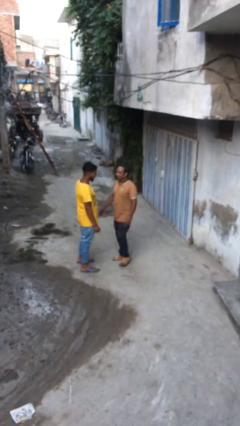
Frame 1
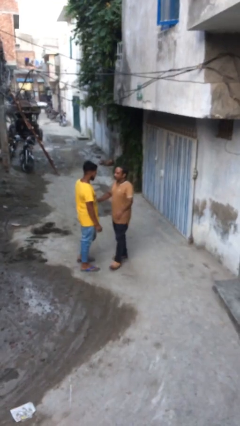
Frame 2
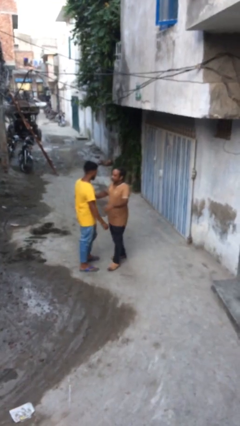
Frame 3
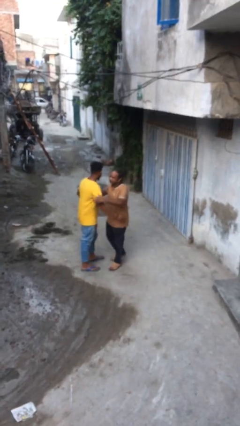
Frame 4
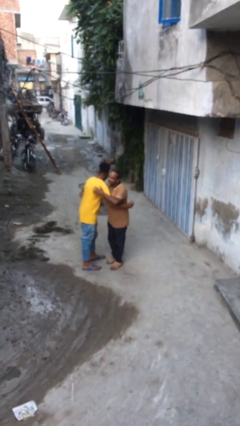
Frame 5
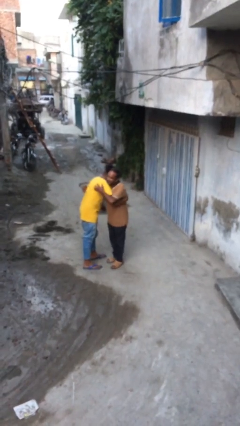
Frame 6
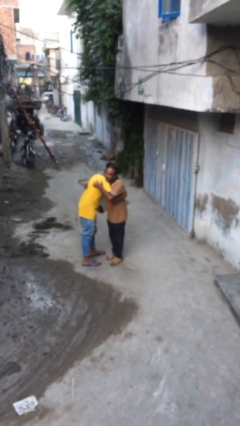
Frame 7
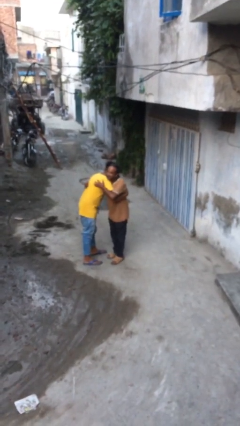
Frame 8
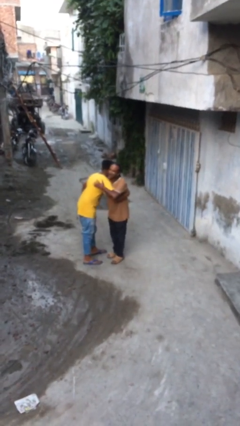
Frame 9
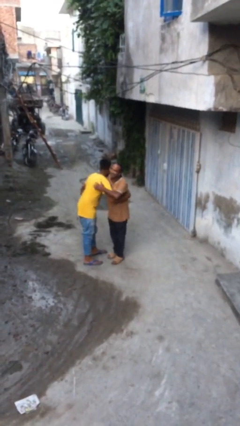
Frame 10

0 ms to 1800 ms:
person embraces person

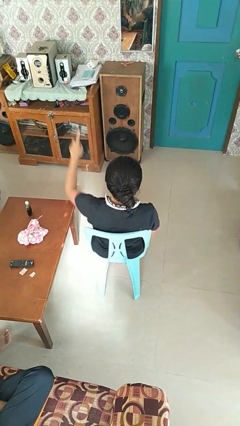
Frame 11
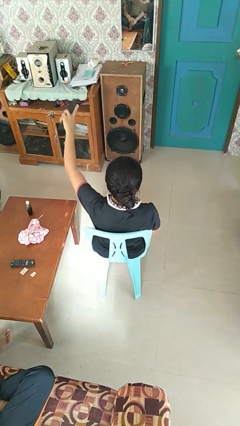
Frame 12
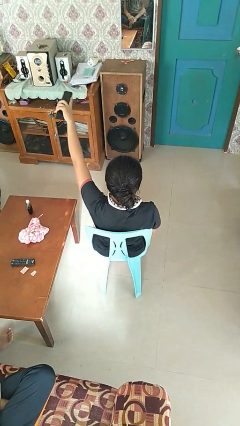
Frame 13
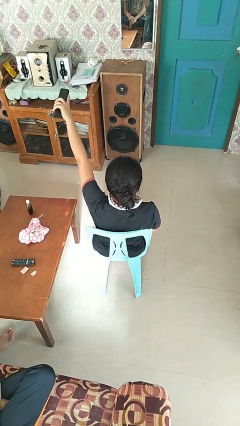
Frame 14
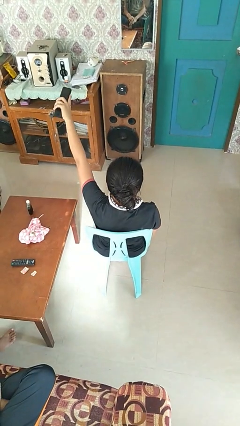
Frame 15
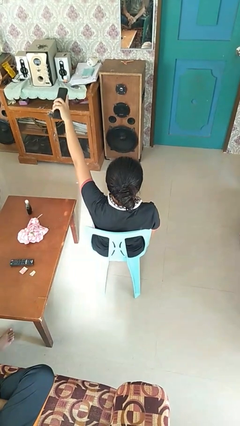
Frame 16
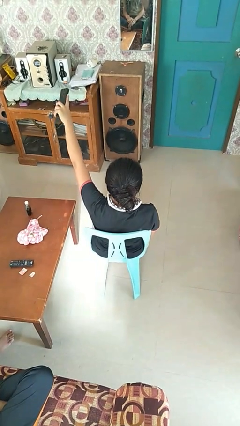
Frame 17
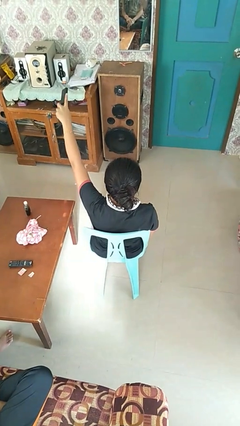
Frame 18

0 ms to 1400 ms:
person uses television remote

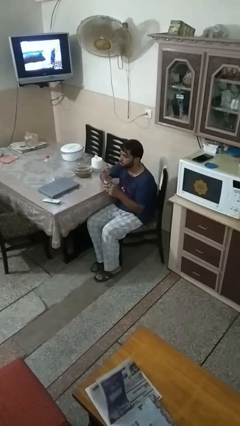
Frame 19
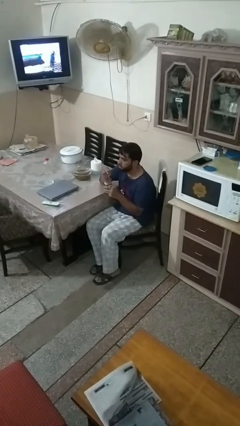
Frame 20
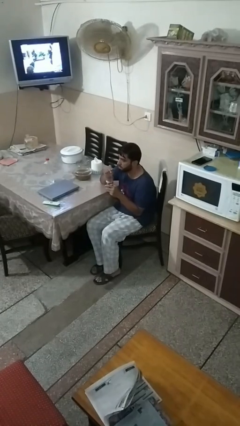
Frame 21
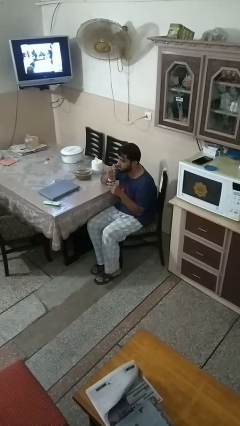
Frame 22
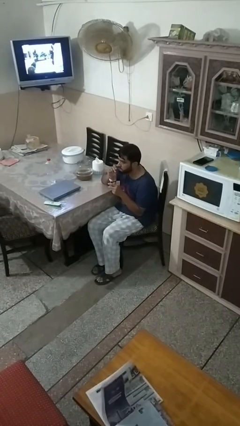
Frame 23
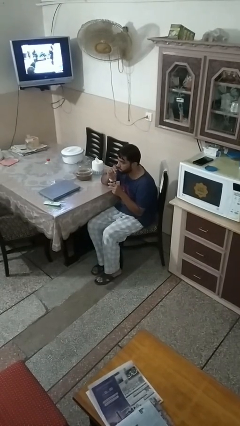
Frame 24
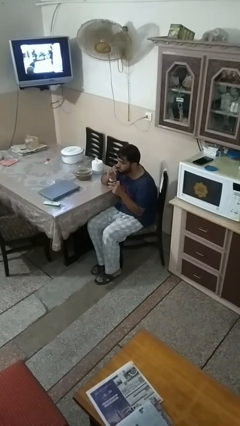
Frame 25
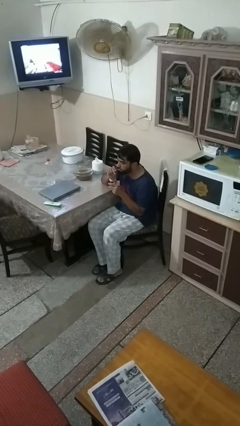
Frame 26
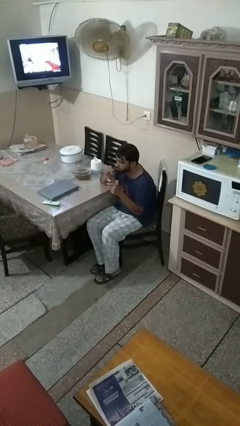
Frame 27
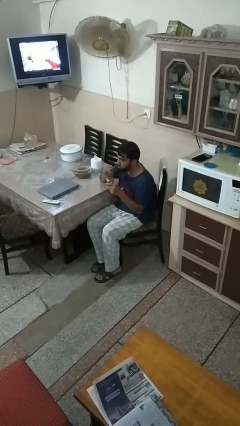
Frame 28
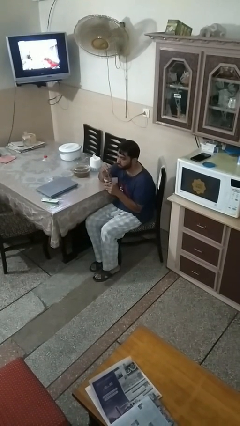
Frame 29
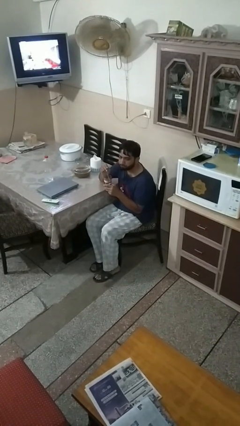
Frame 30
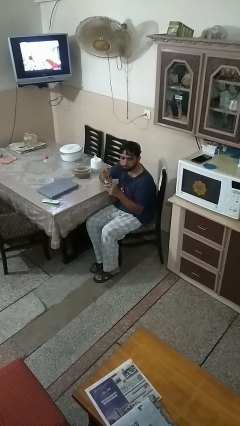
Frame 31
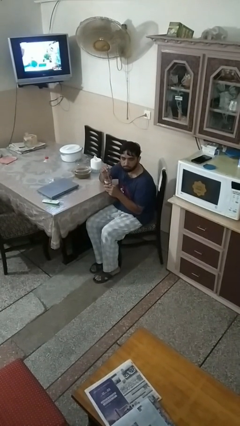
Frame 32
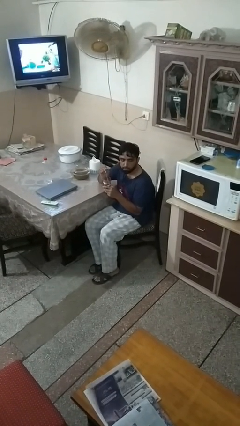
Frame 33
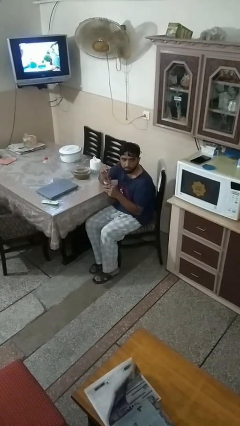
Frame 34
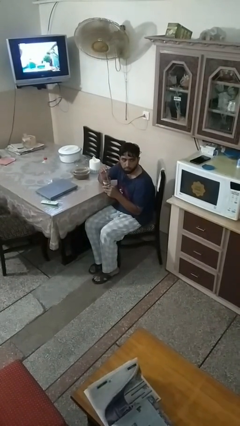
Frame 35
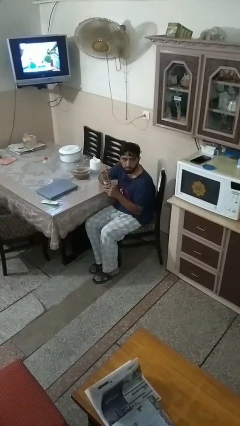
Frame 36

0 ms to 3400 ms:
person drinks from straw

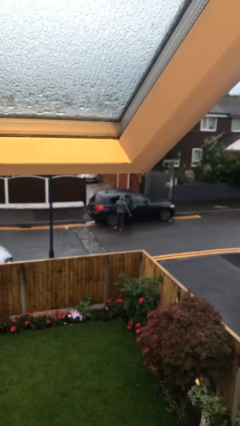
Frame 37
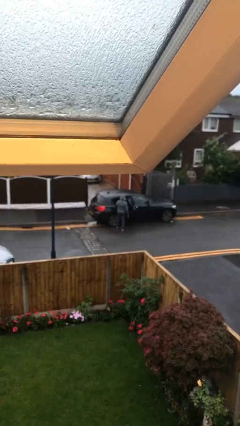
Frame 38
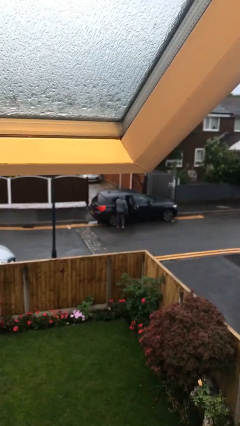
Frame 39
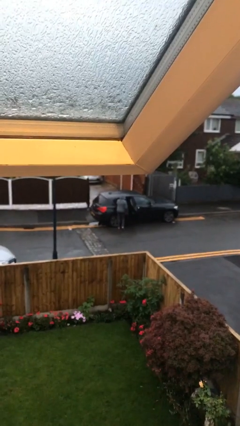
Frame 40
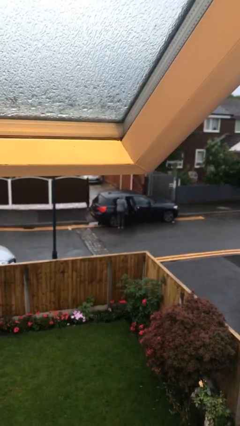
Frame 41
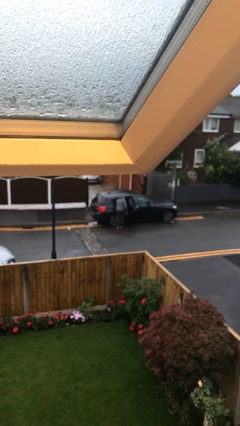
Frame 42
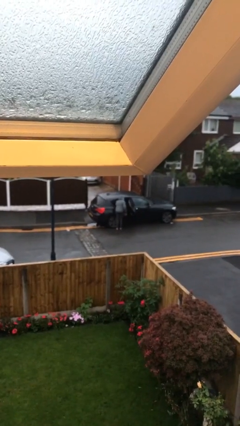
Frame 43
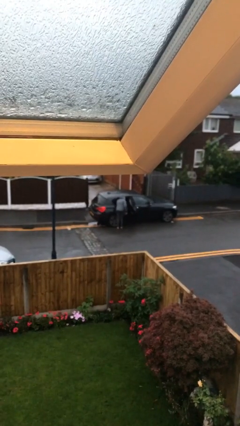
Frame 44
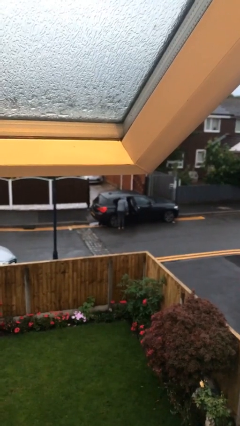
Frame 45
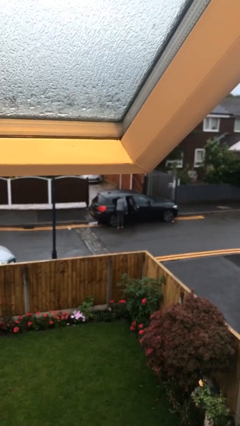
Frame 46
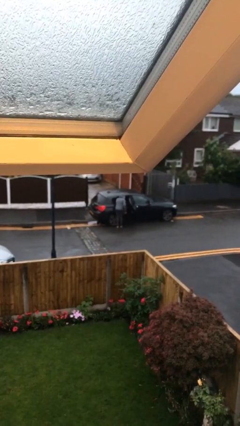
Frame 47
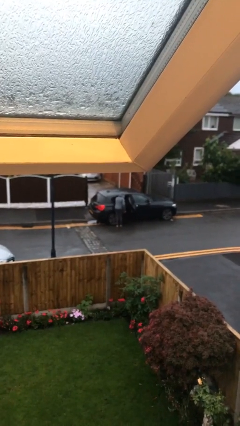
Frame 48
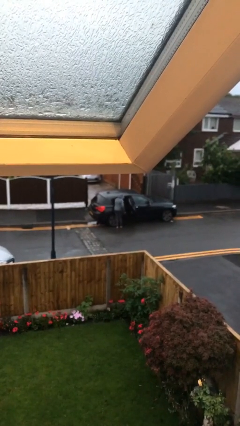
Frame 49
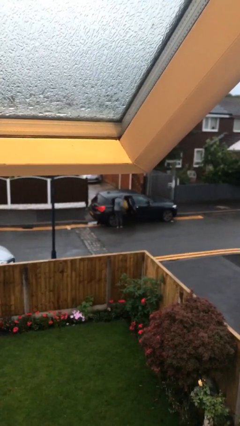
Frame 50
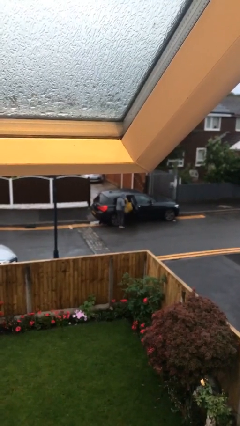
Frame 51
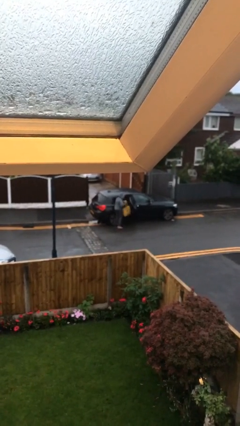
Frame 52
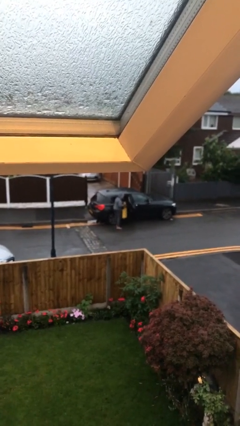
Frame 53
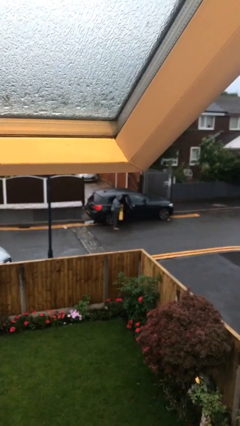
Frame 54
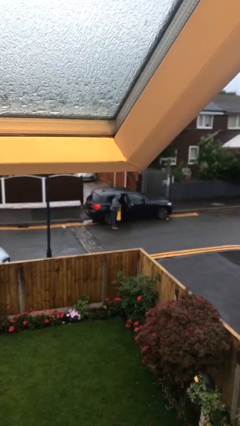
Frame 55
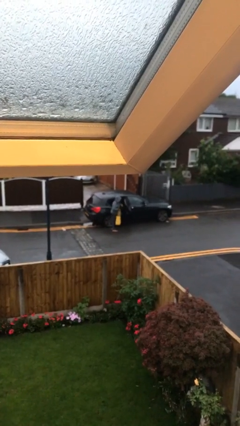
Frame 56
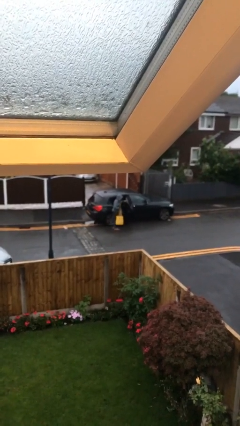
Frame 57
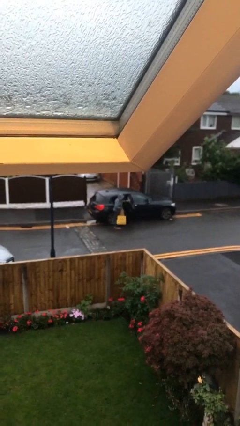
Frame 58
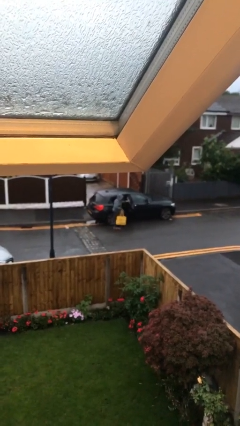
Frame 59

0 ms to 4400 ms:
person unloads car

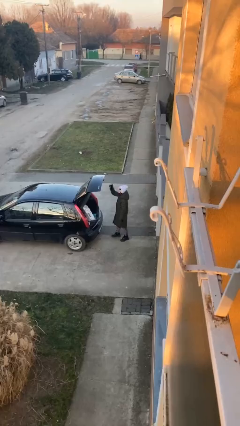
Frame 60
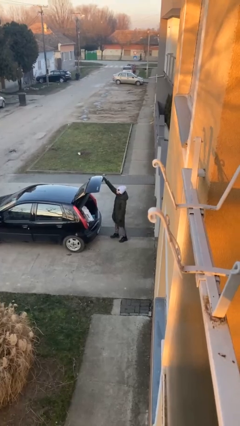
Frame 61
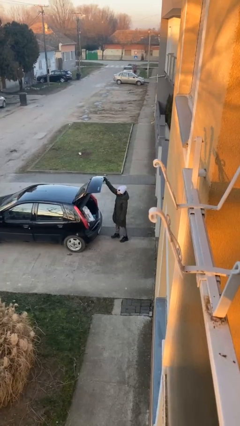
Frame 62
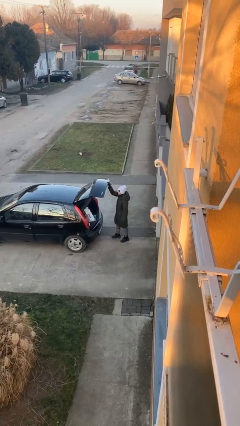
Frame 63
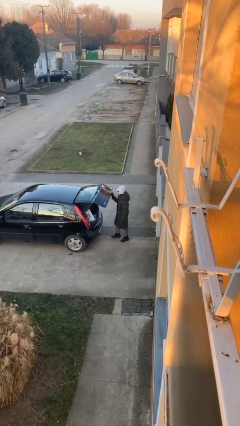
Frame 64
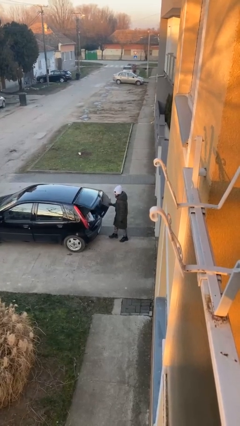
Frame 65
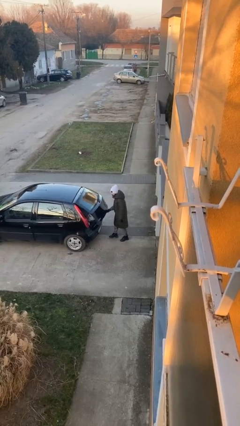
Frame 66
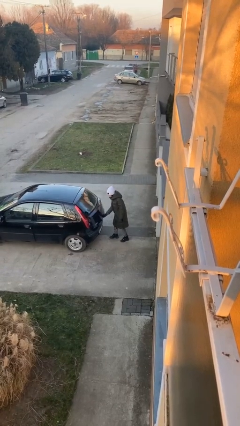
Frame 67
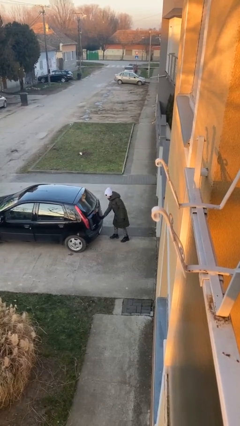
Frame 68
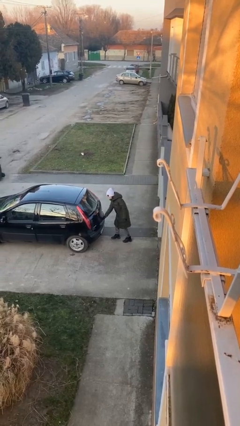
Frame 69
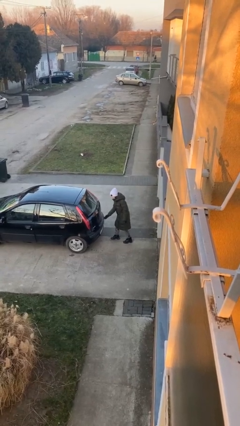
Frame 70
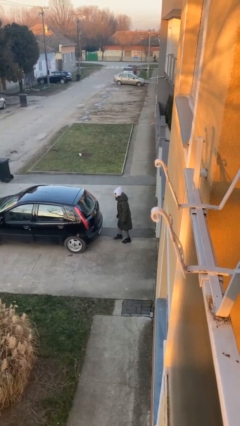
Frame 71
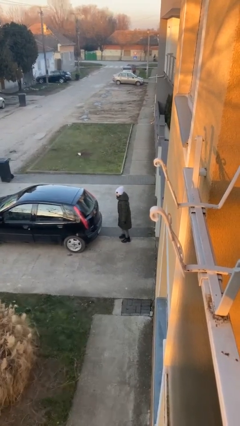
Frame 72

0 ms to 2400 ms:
person closes car trunk

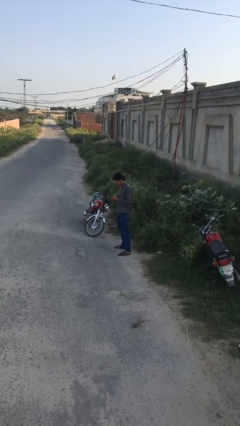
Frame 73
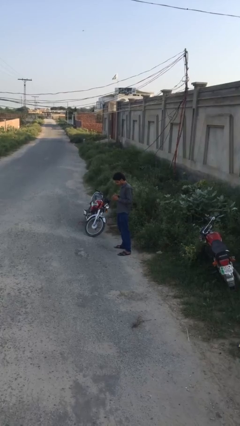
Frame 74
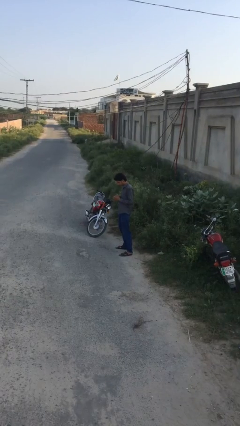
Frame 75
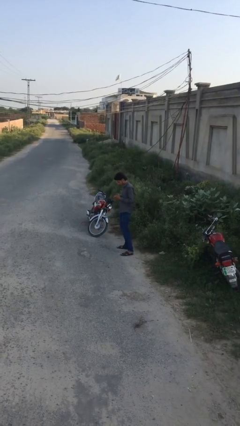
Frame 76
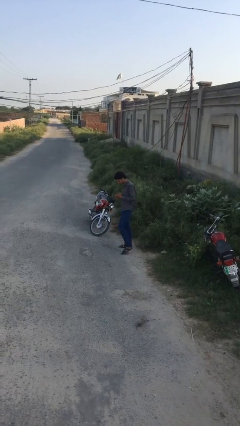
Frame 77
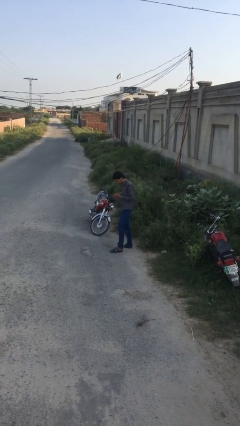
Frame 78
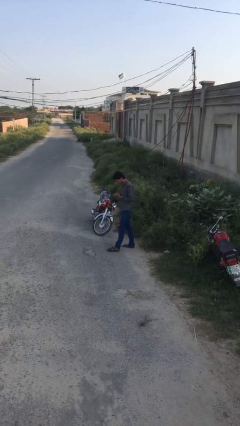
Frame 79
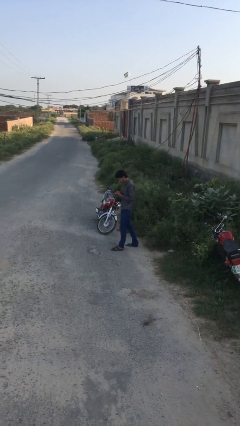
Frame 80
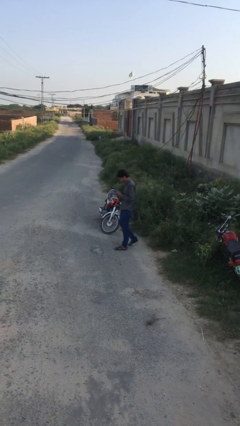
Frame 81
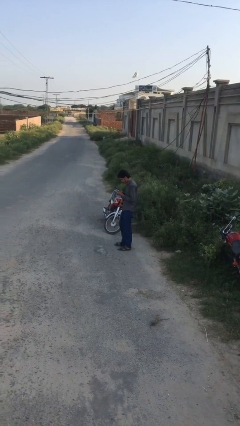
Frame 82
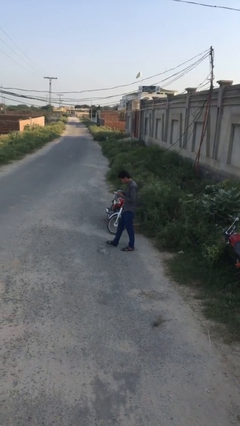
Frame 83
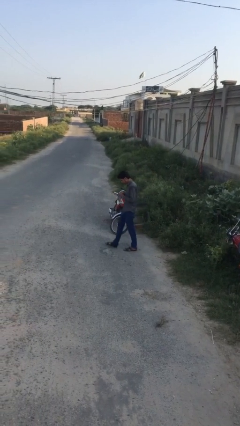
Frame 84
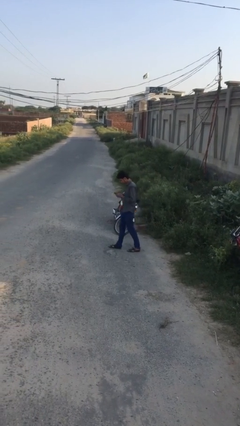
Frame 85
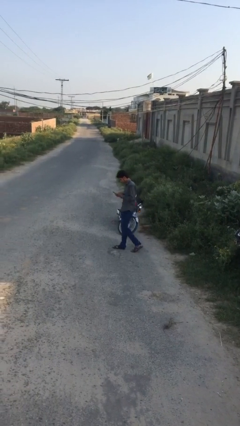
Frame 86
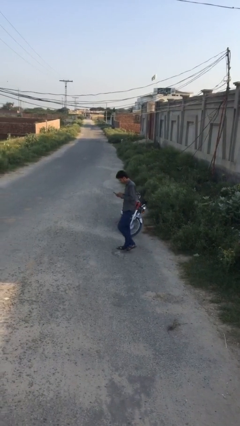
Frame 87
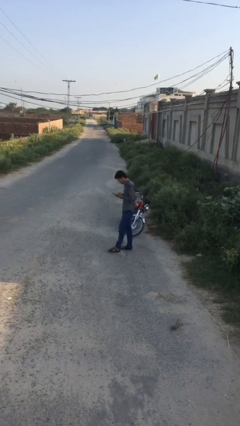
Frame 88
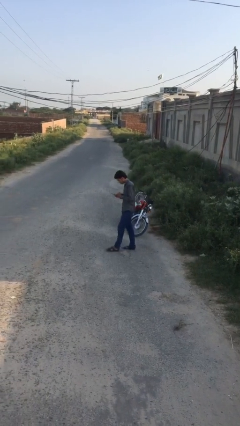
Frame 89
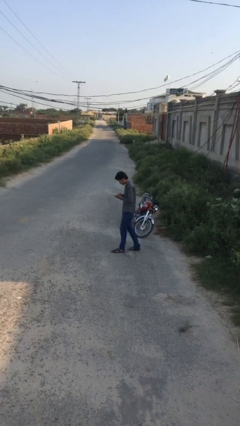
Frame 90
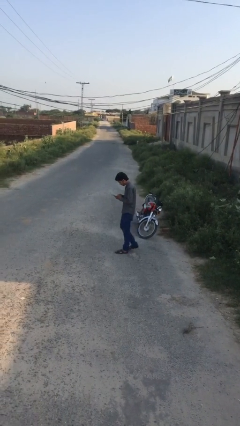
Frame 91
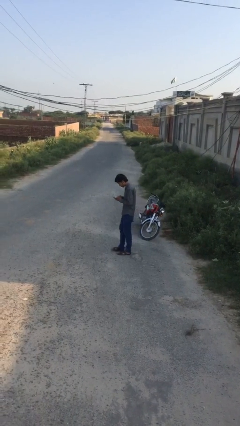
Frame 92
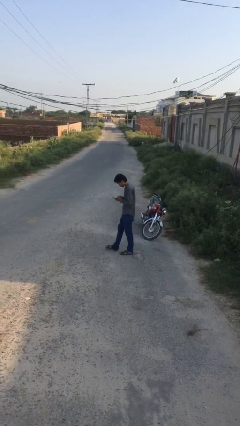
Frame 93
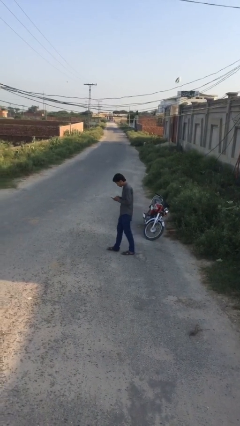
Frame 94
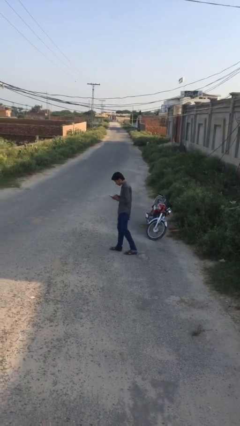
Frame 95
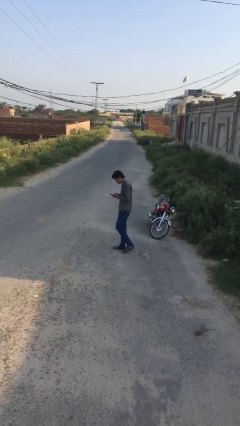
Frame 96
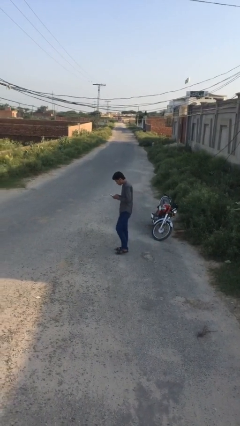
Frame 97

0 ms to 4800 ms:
person texts on phone
